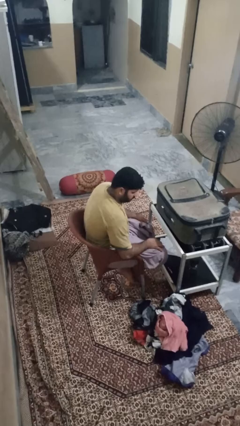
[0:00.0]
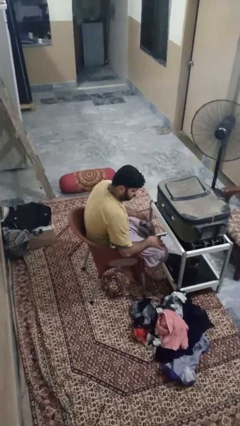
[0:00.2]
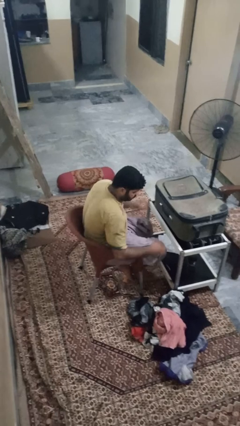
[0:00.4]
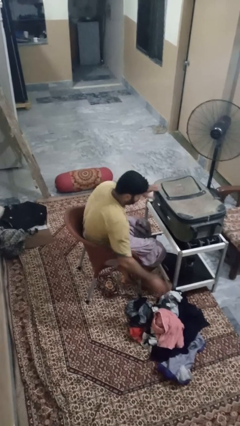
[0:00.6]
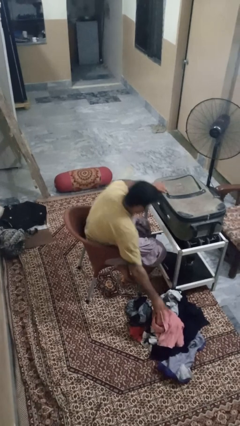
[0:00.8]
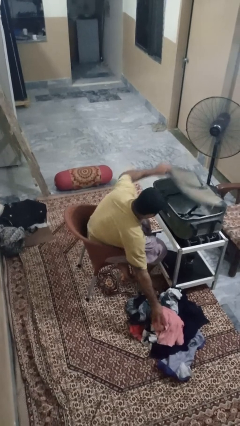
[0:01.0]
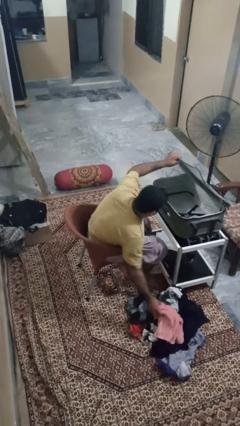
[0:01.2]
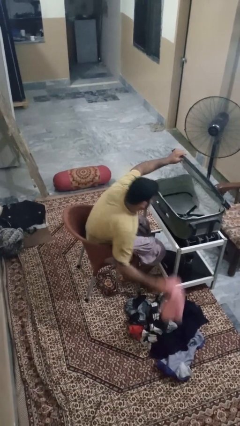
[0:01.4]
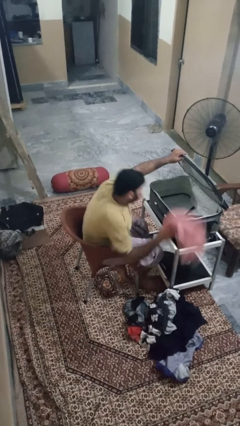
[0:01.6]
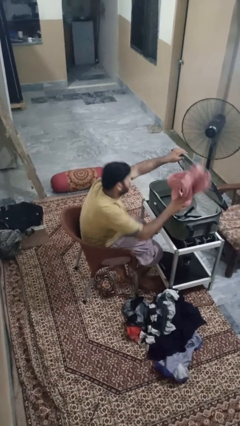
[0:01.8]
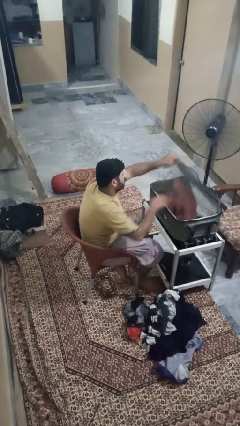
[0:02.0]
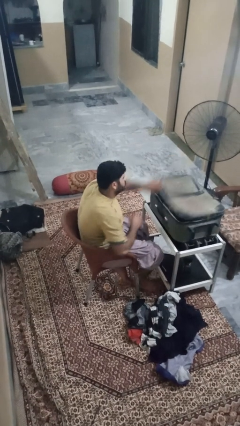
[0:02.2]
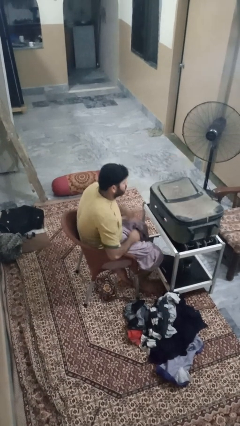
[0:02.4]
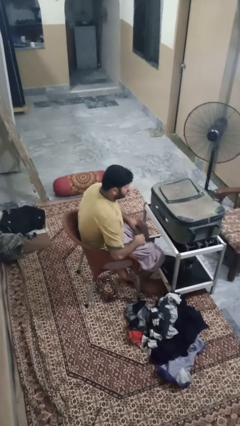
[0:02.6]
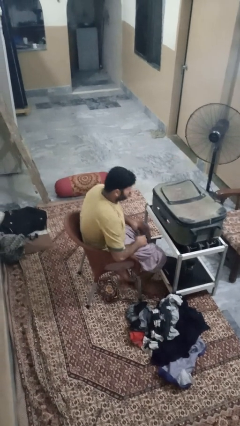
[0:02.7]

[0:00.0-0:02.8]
person loads clothes into suitcase

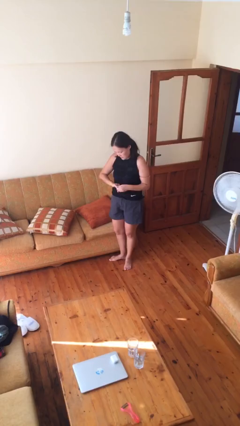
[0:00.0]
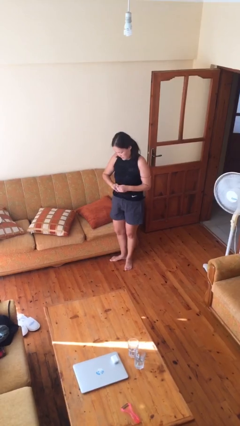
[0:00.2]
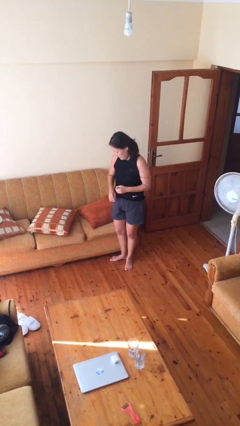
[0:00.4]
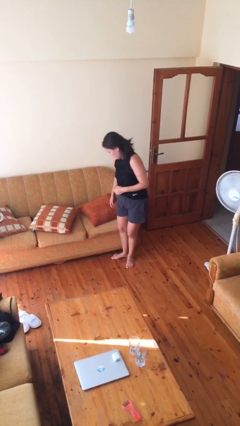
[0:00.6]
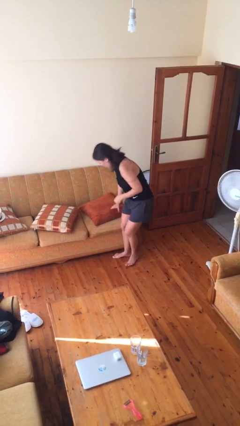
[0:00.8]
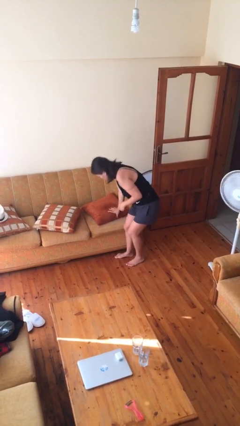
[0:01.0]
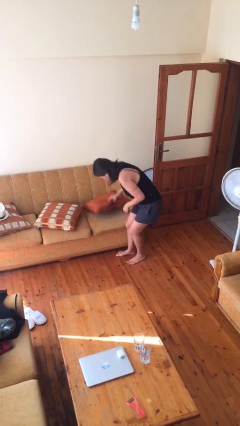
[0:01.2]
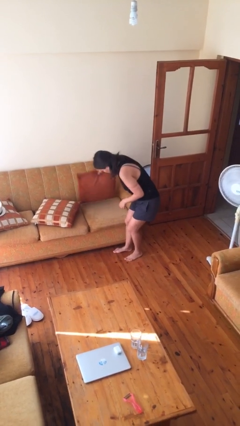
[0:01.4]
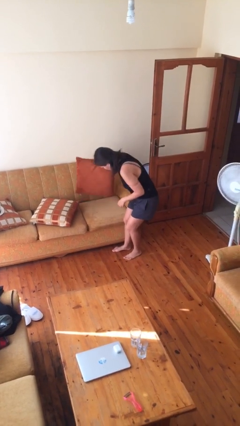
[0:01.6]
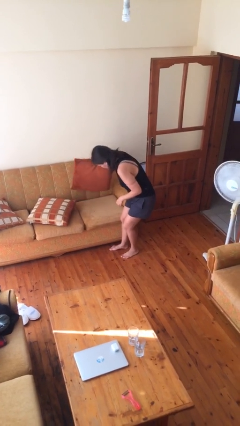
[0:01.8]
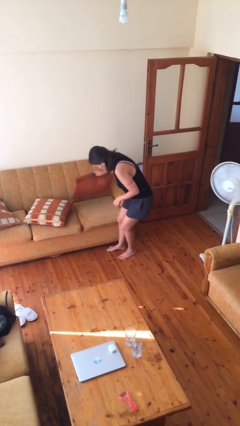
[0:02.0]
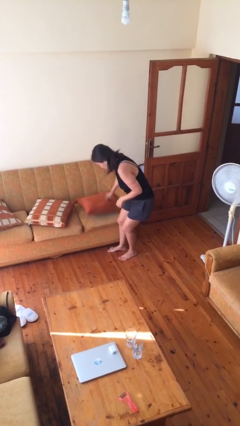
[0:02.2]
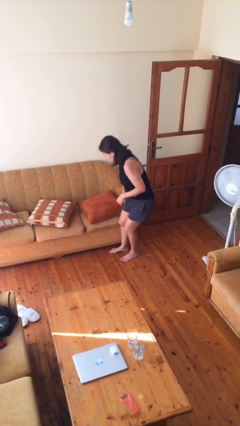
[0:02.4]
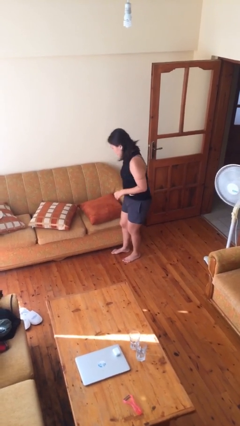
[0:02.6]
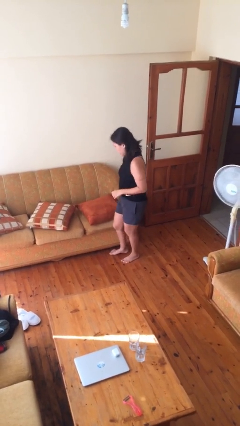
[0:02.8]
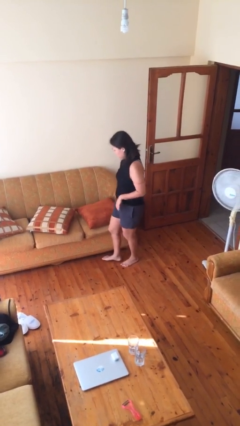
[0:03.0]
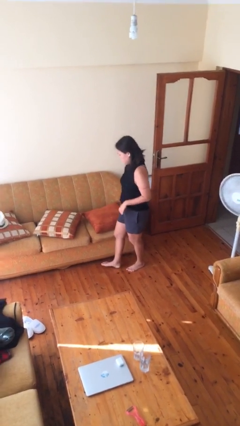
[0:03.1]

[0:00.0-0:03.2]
person searches in couch

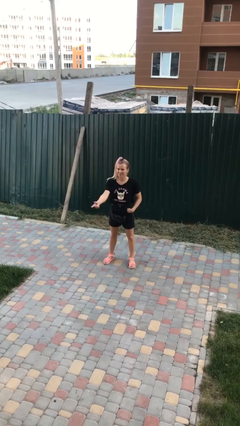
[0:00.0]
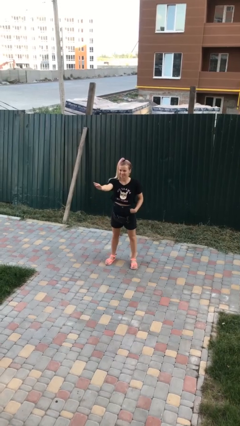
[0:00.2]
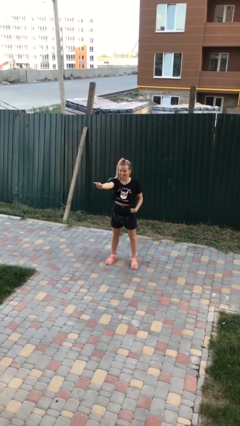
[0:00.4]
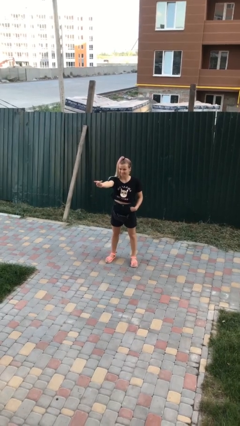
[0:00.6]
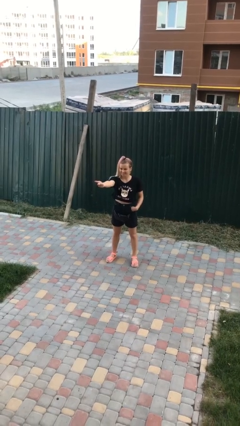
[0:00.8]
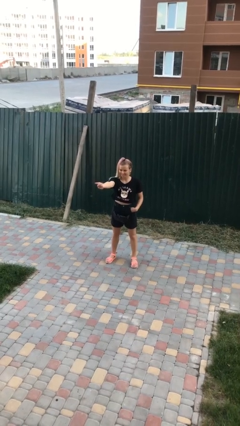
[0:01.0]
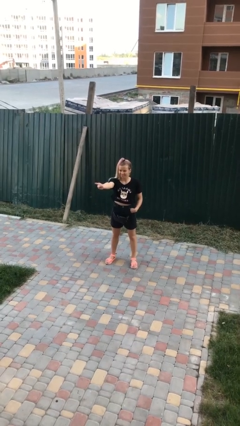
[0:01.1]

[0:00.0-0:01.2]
person gestures come here

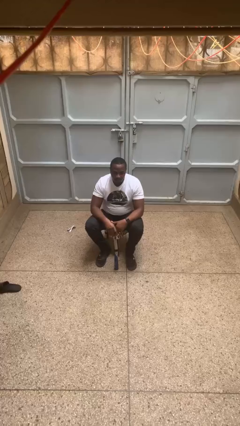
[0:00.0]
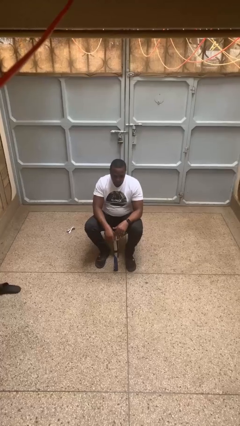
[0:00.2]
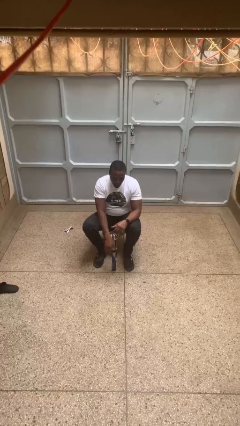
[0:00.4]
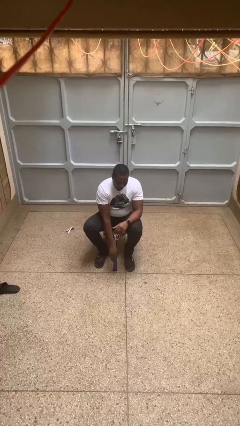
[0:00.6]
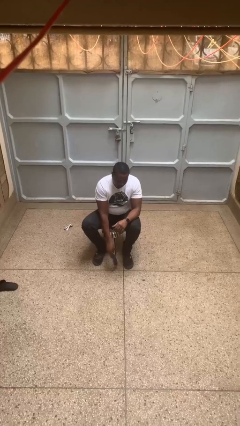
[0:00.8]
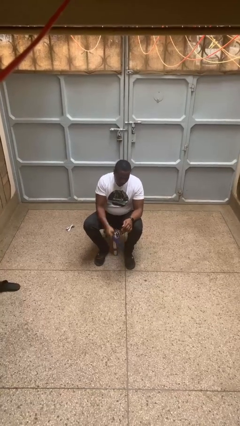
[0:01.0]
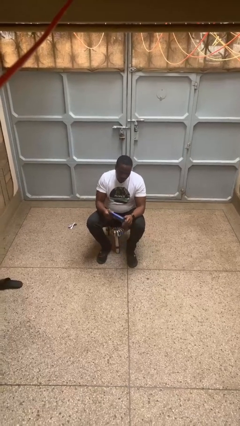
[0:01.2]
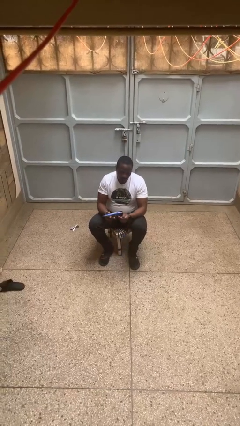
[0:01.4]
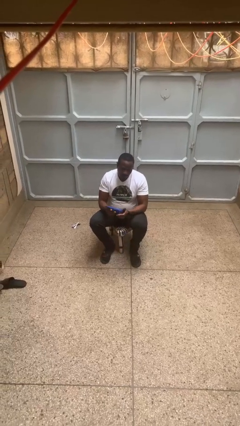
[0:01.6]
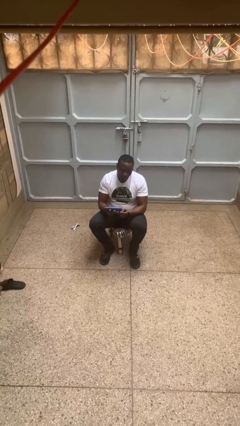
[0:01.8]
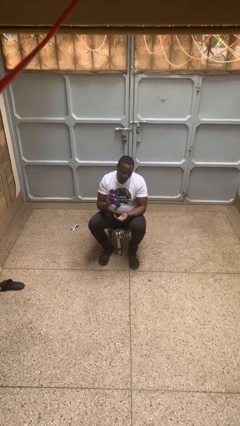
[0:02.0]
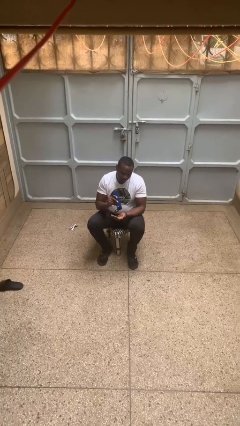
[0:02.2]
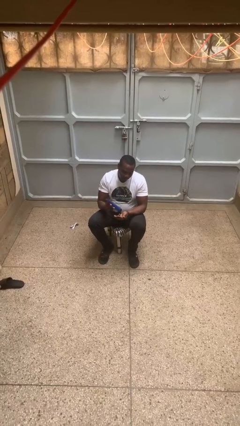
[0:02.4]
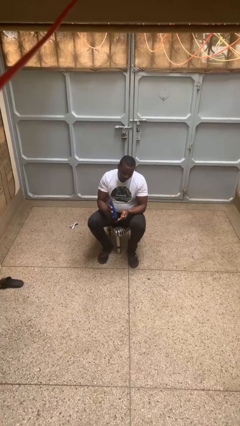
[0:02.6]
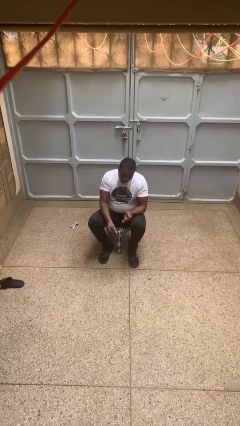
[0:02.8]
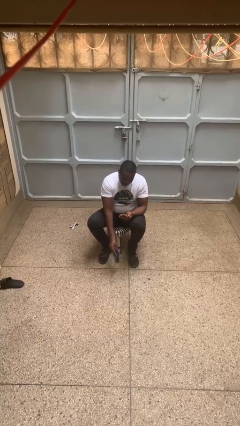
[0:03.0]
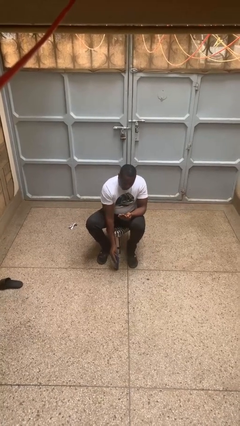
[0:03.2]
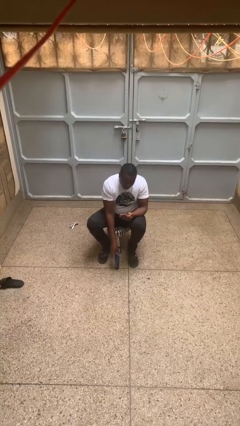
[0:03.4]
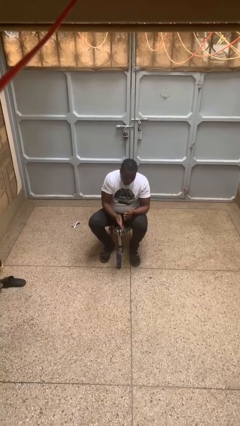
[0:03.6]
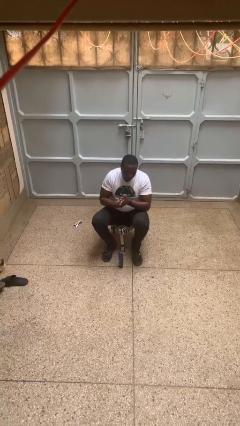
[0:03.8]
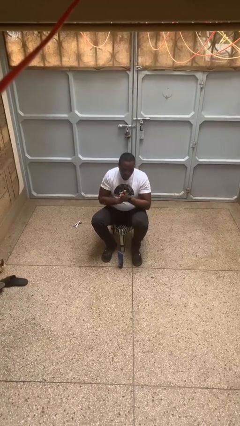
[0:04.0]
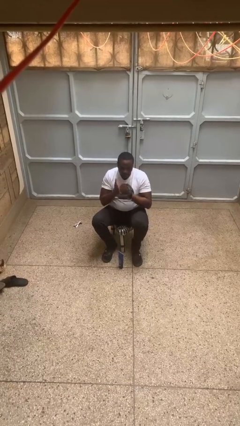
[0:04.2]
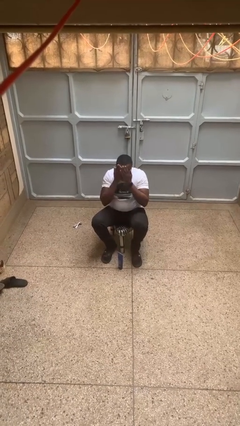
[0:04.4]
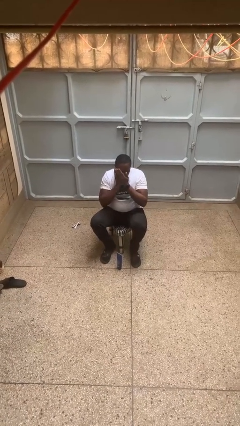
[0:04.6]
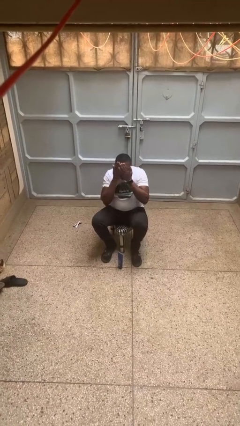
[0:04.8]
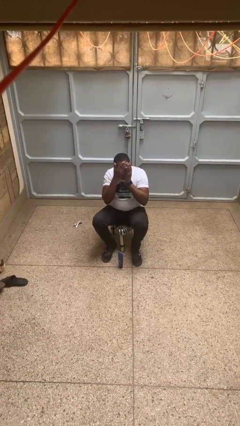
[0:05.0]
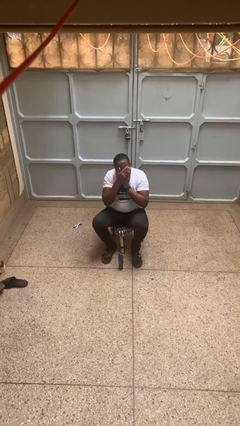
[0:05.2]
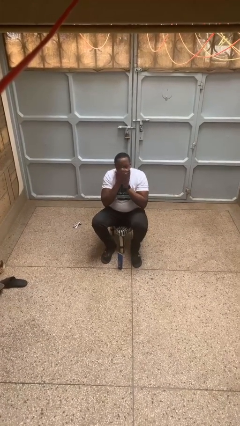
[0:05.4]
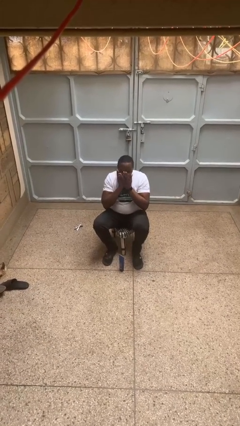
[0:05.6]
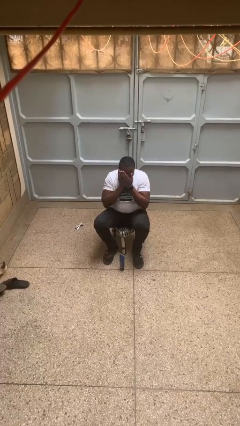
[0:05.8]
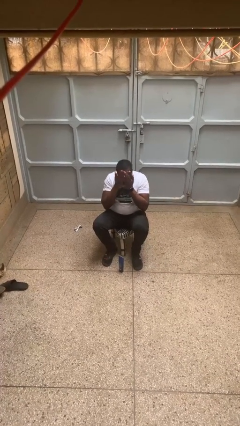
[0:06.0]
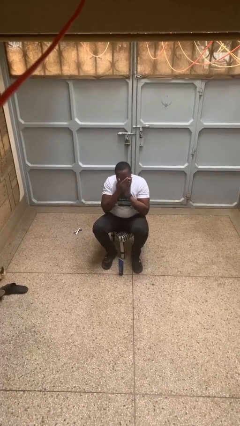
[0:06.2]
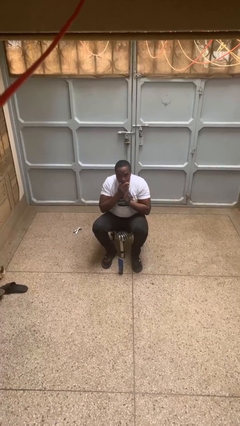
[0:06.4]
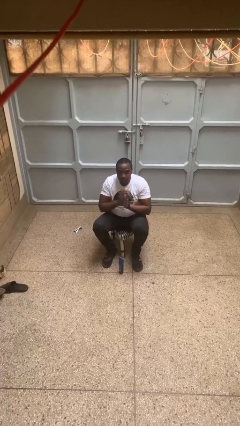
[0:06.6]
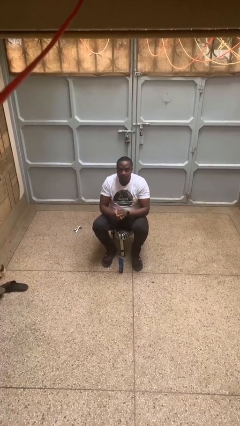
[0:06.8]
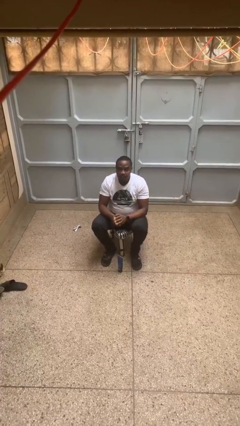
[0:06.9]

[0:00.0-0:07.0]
person applies facial moisturizer

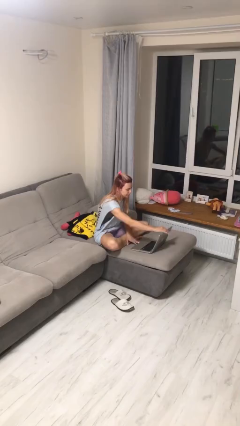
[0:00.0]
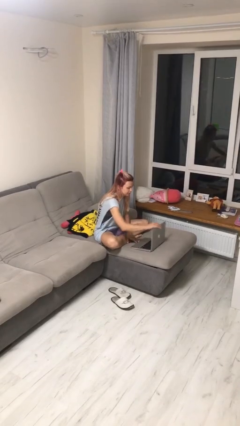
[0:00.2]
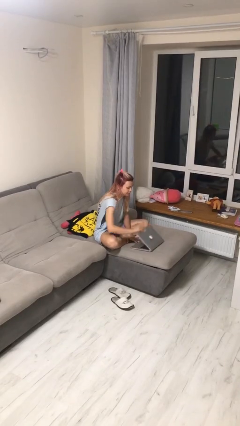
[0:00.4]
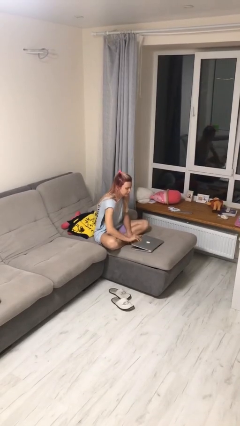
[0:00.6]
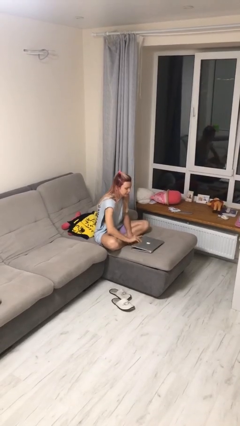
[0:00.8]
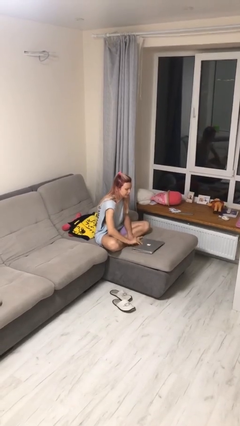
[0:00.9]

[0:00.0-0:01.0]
person closes laptop

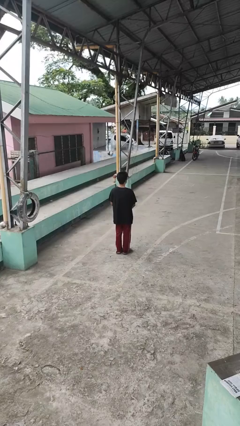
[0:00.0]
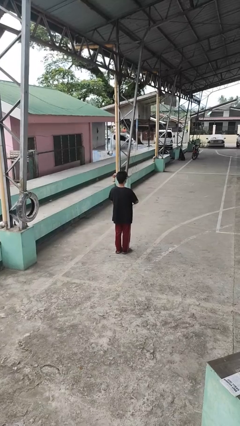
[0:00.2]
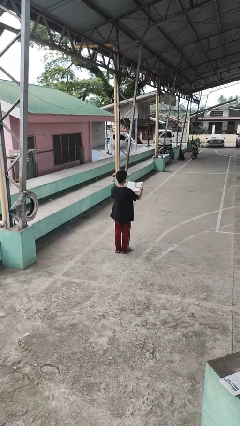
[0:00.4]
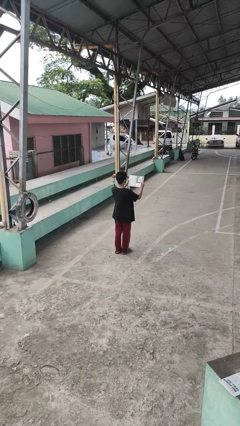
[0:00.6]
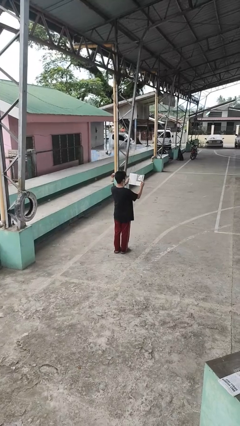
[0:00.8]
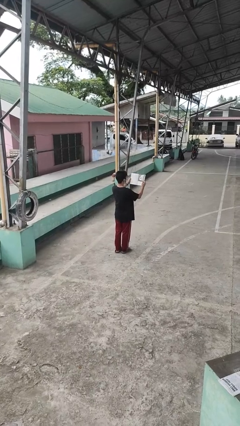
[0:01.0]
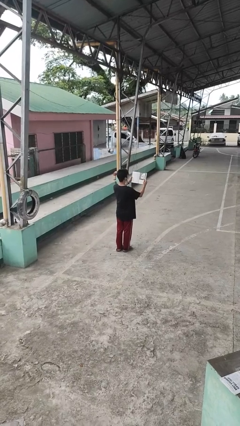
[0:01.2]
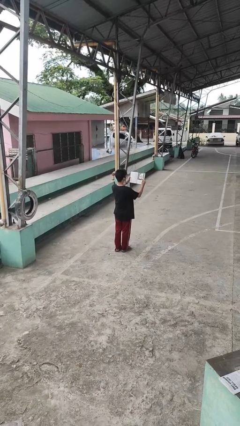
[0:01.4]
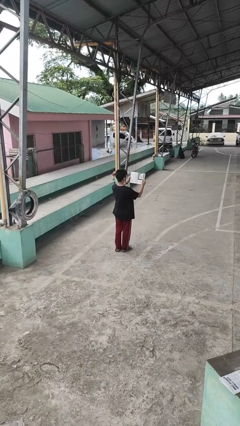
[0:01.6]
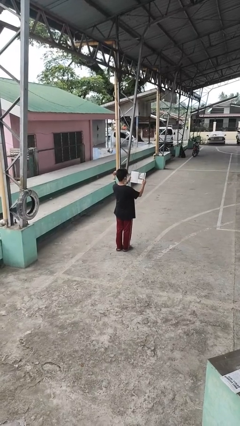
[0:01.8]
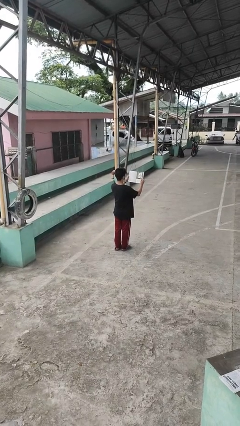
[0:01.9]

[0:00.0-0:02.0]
person reads book

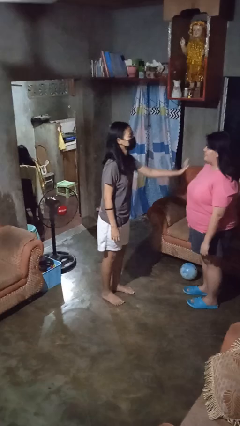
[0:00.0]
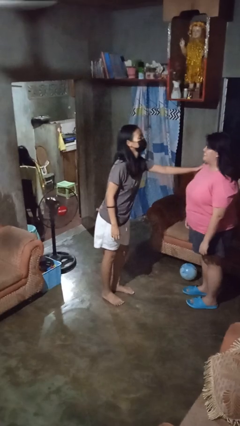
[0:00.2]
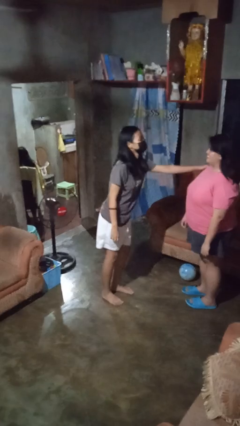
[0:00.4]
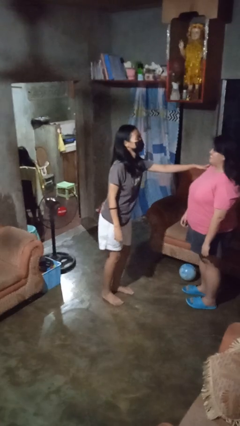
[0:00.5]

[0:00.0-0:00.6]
person shoves person
